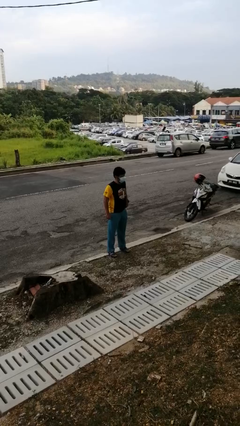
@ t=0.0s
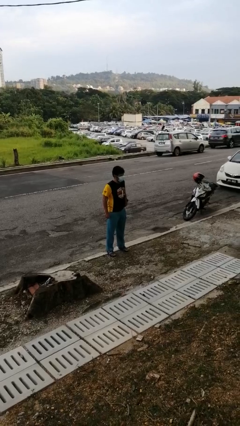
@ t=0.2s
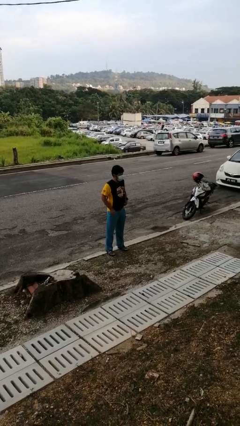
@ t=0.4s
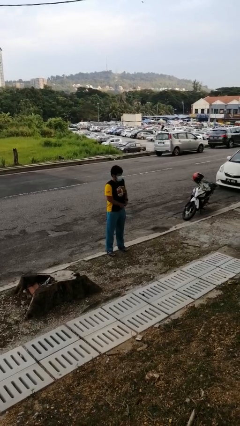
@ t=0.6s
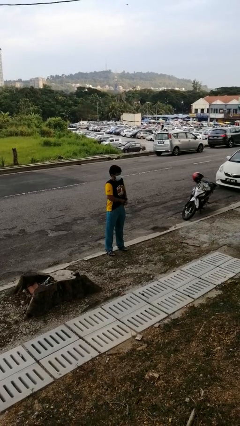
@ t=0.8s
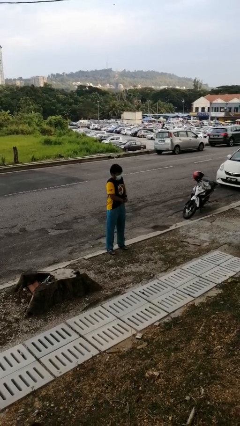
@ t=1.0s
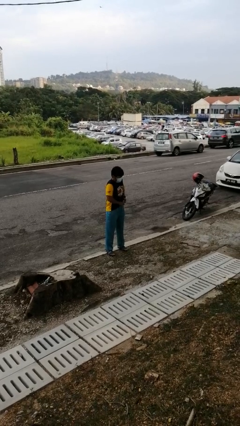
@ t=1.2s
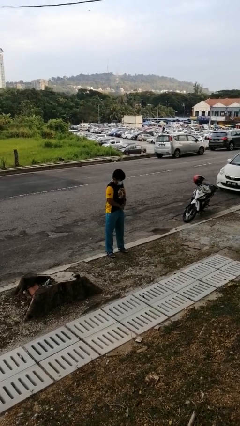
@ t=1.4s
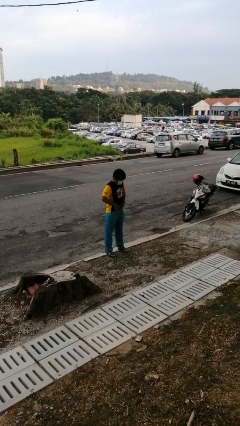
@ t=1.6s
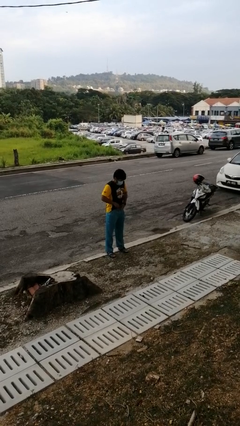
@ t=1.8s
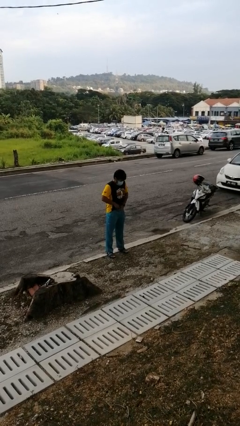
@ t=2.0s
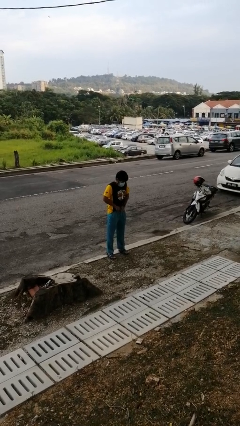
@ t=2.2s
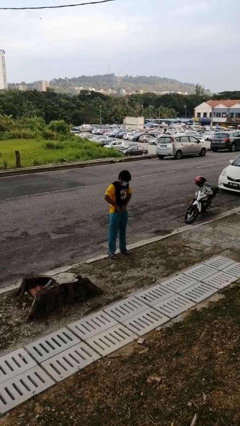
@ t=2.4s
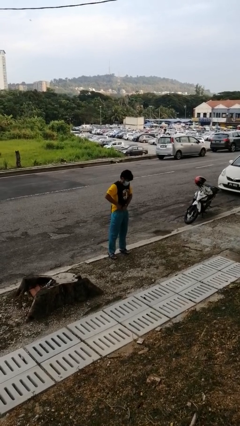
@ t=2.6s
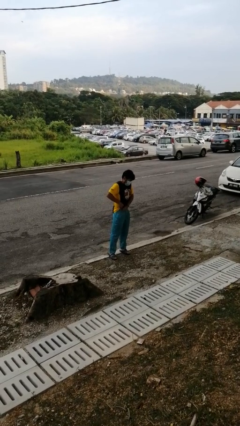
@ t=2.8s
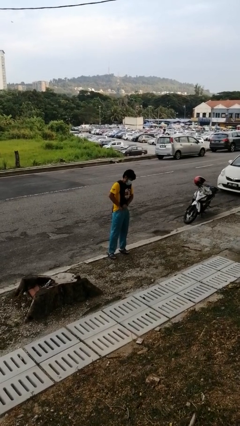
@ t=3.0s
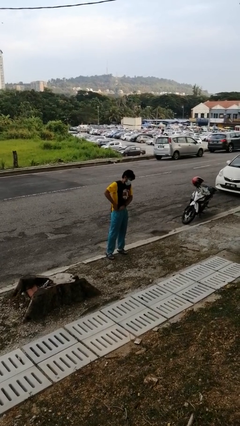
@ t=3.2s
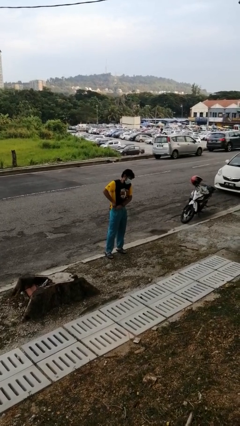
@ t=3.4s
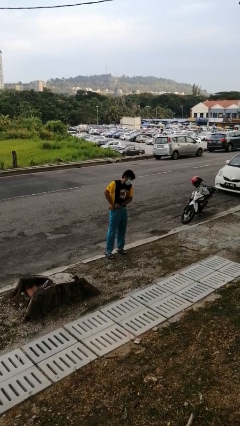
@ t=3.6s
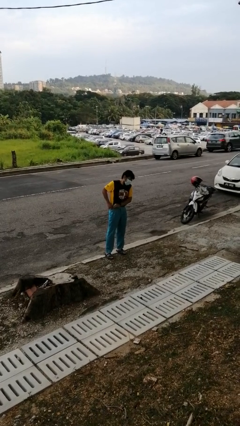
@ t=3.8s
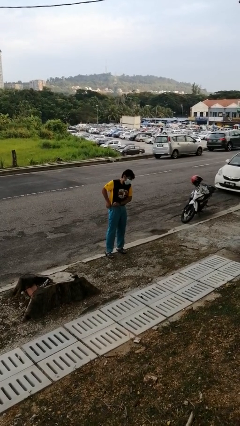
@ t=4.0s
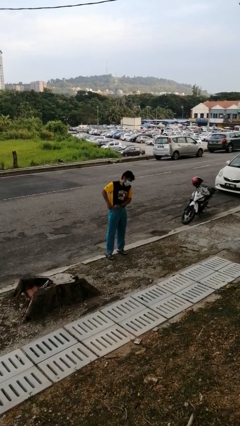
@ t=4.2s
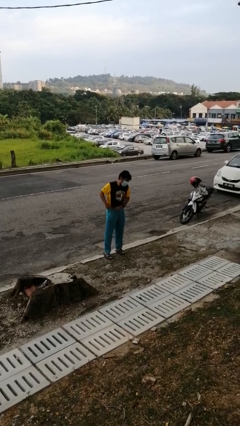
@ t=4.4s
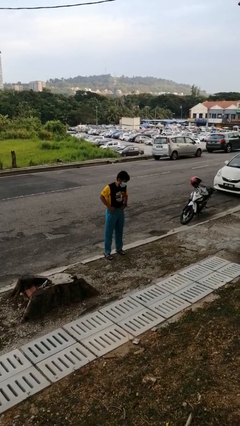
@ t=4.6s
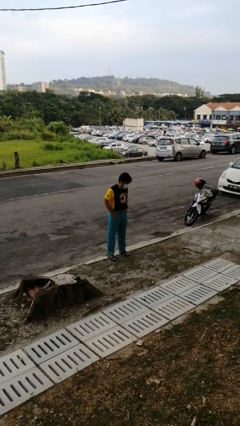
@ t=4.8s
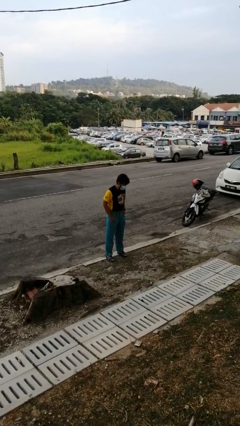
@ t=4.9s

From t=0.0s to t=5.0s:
person tucks in shirt

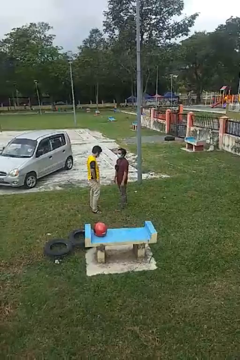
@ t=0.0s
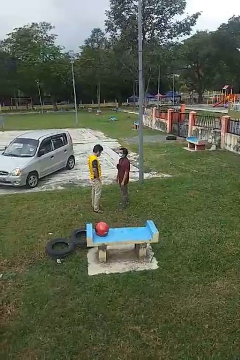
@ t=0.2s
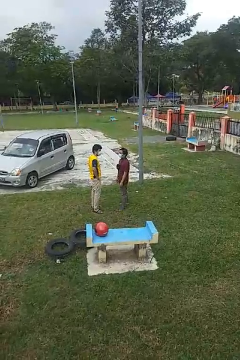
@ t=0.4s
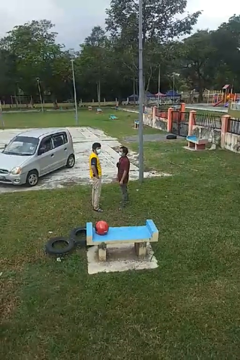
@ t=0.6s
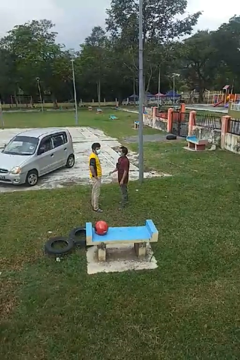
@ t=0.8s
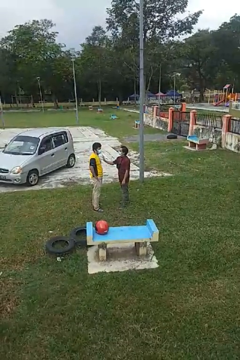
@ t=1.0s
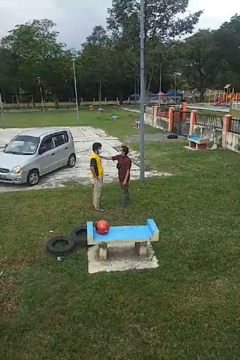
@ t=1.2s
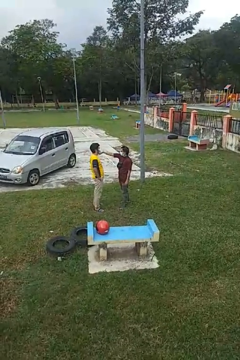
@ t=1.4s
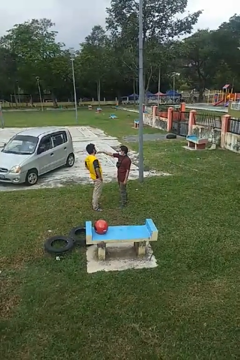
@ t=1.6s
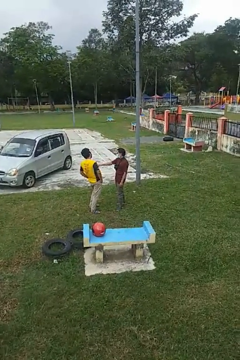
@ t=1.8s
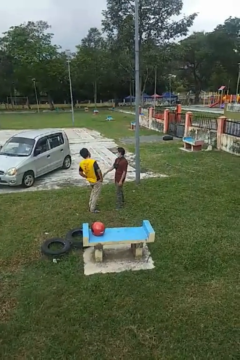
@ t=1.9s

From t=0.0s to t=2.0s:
person shoves person

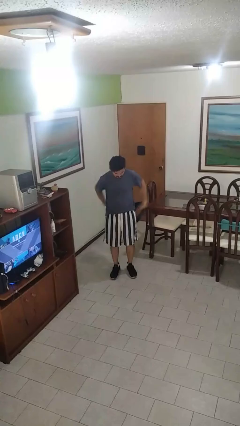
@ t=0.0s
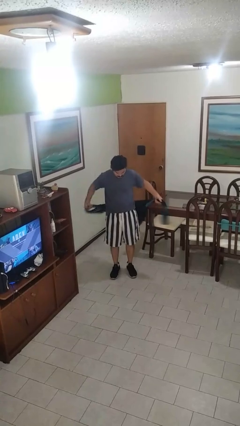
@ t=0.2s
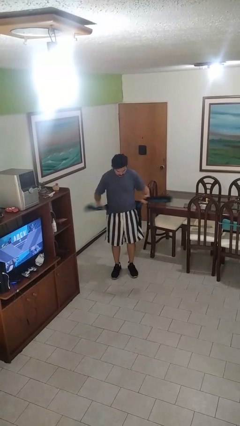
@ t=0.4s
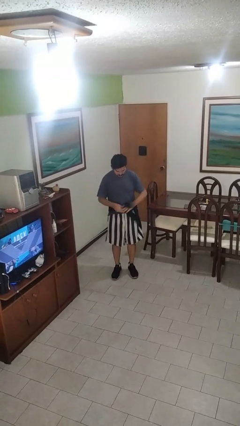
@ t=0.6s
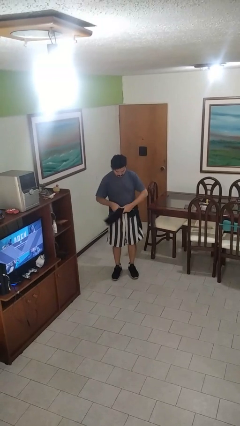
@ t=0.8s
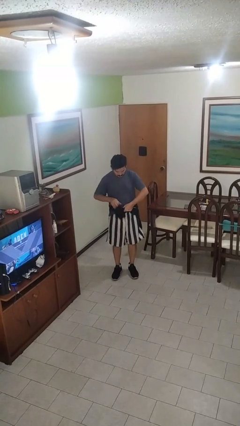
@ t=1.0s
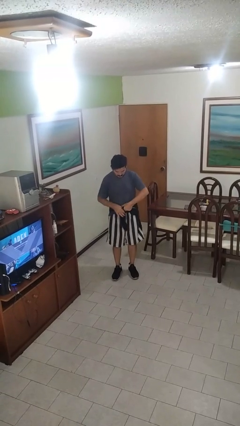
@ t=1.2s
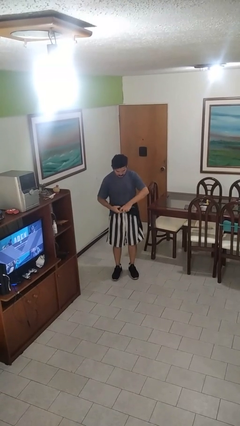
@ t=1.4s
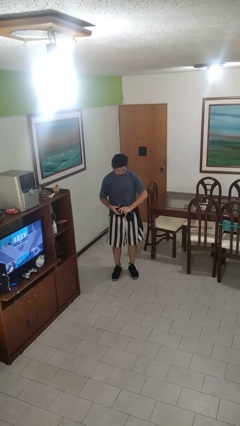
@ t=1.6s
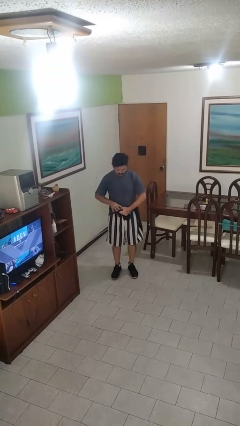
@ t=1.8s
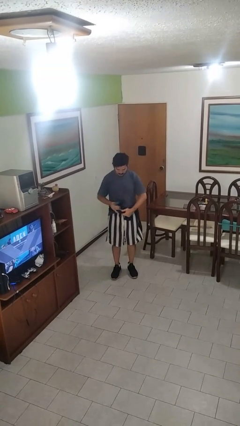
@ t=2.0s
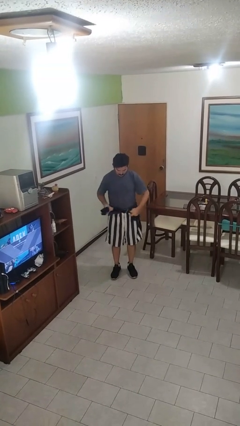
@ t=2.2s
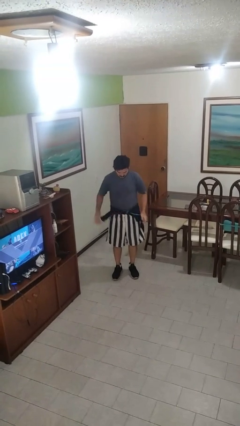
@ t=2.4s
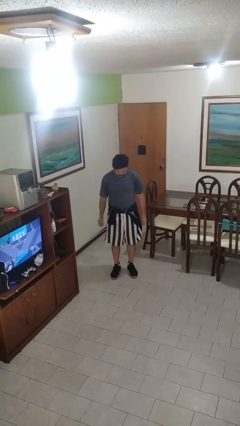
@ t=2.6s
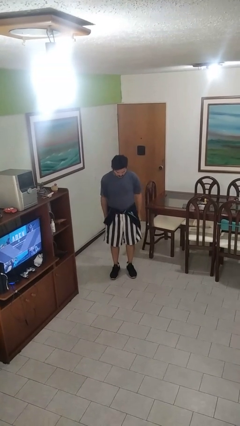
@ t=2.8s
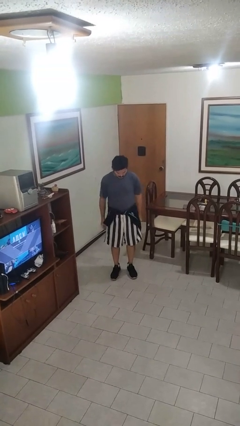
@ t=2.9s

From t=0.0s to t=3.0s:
person ties jacket around waist

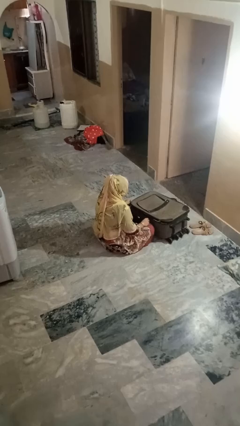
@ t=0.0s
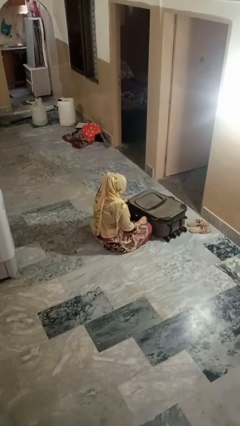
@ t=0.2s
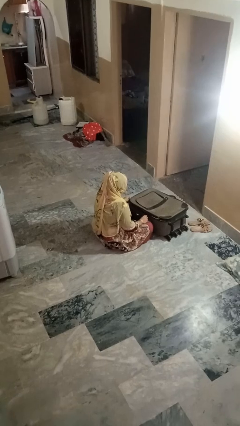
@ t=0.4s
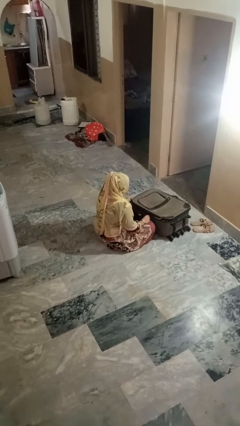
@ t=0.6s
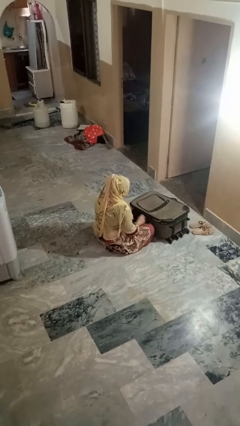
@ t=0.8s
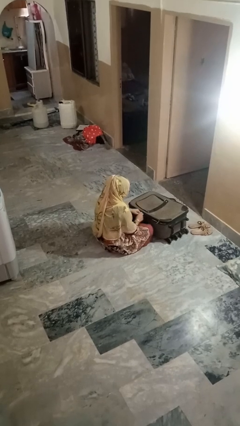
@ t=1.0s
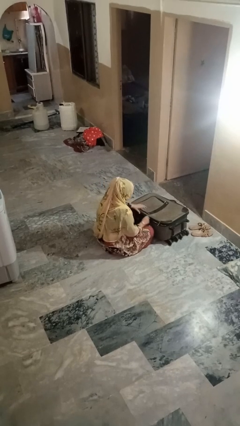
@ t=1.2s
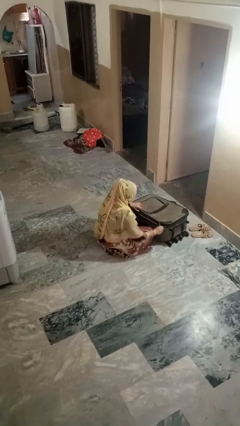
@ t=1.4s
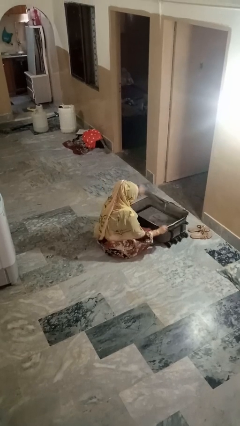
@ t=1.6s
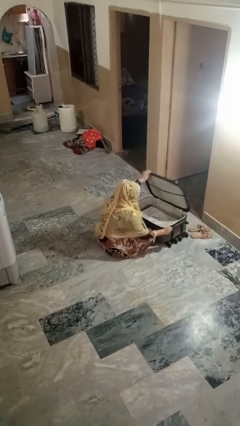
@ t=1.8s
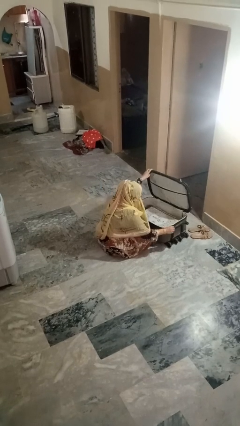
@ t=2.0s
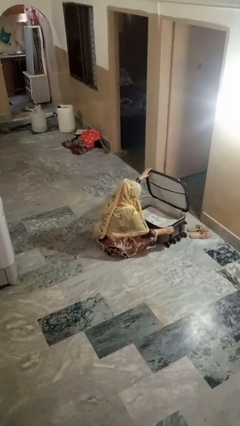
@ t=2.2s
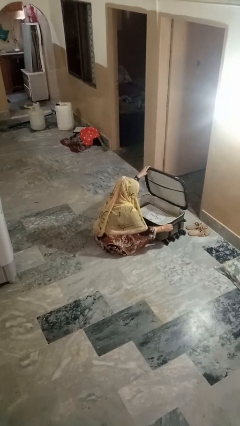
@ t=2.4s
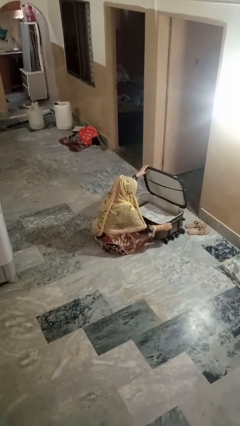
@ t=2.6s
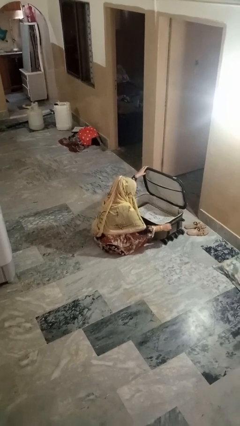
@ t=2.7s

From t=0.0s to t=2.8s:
person opens suitcase

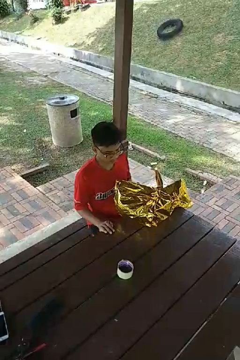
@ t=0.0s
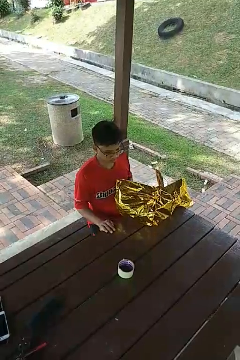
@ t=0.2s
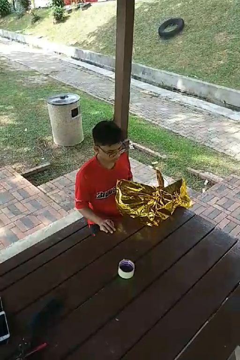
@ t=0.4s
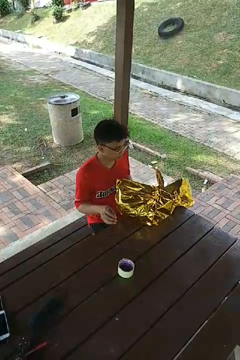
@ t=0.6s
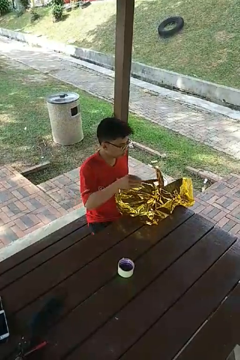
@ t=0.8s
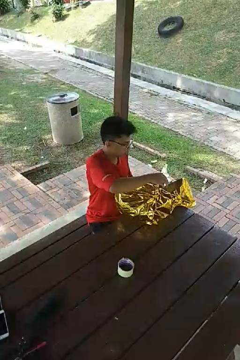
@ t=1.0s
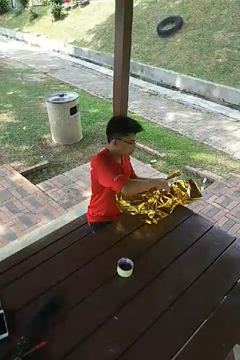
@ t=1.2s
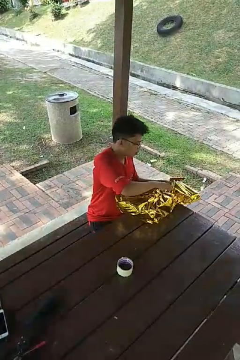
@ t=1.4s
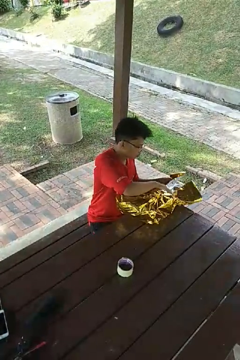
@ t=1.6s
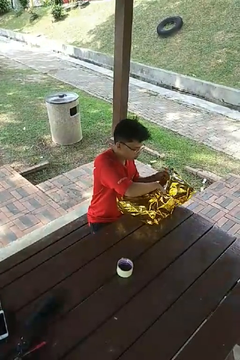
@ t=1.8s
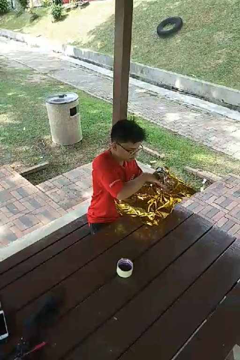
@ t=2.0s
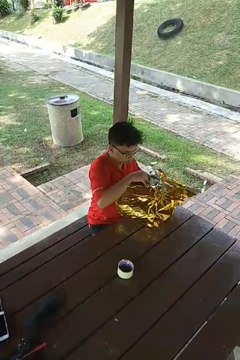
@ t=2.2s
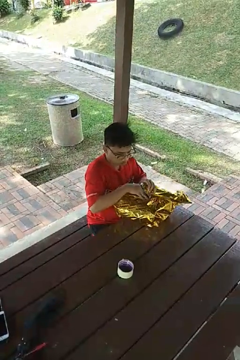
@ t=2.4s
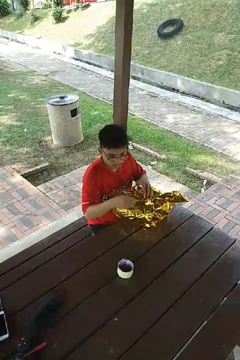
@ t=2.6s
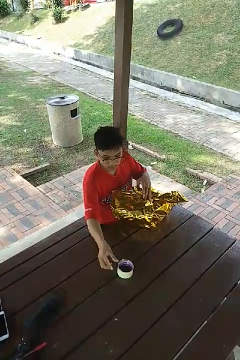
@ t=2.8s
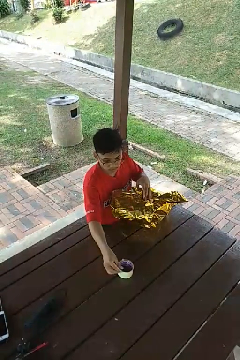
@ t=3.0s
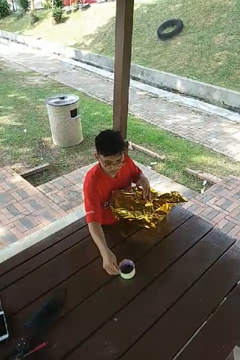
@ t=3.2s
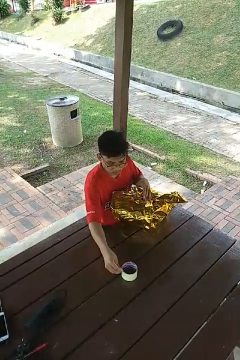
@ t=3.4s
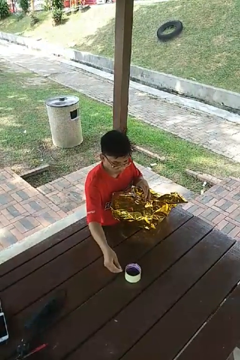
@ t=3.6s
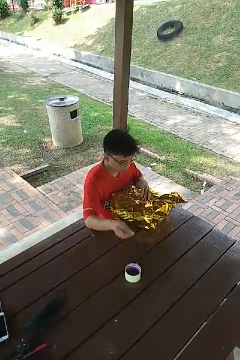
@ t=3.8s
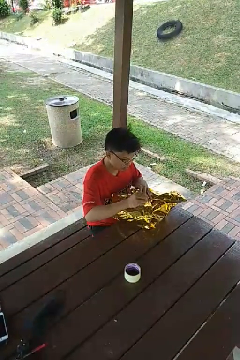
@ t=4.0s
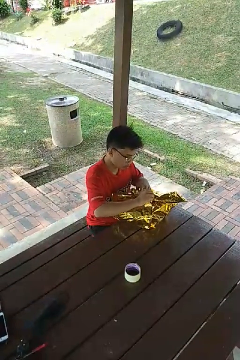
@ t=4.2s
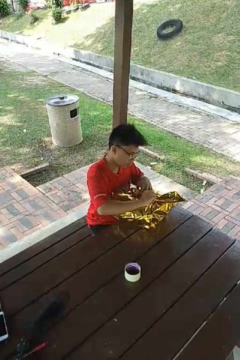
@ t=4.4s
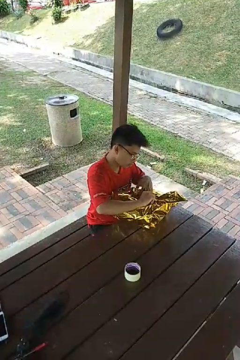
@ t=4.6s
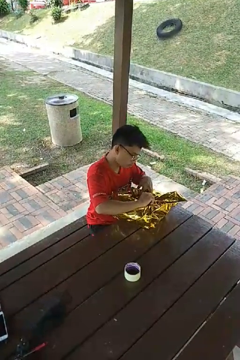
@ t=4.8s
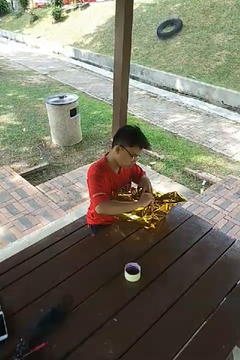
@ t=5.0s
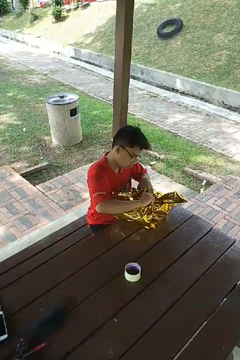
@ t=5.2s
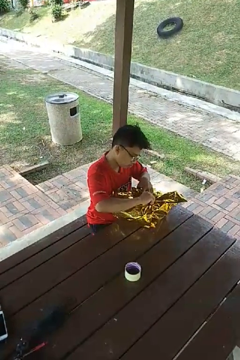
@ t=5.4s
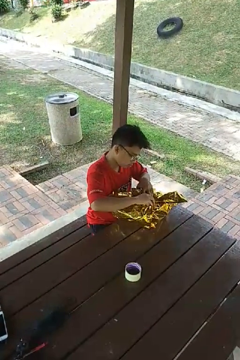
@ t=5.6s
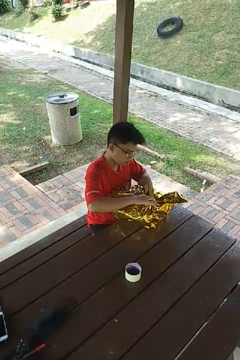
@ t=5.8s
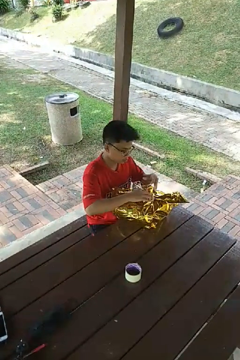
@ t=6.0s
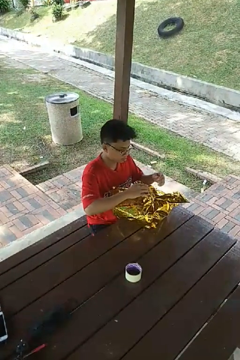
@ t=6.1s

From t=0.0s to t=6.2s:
person wraps box
